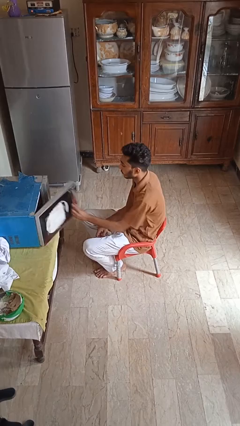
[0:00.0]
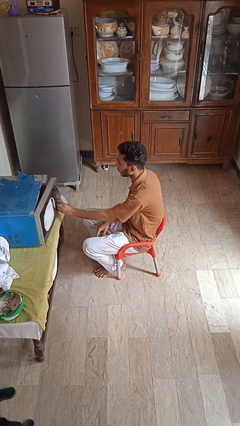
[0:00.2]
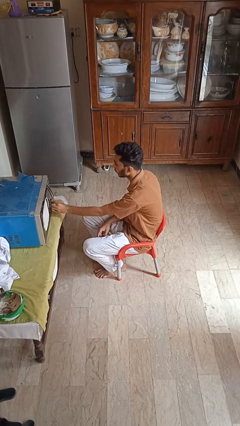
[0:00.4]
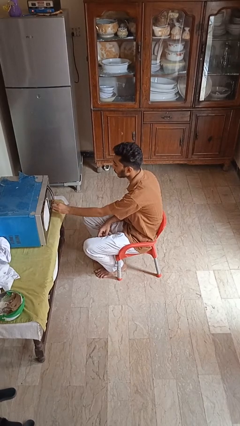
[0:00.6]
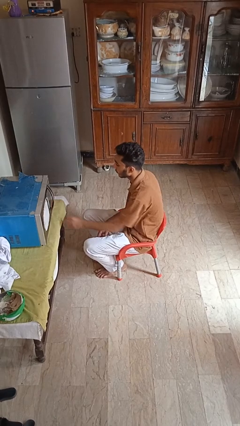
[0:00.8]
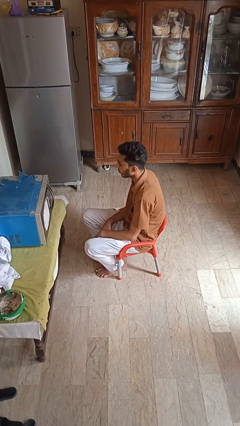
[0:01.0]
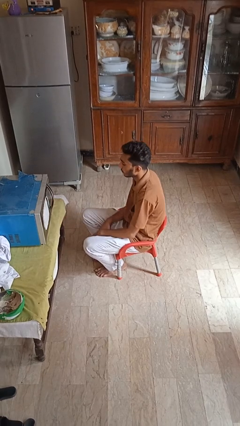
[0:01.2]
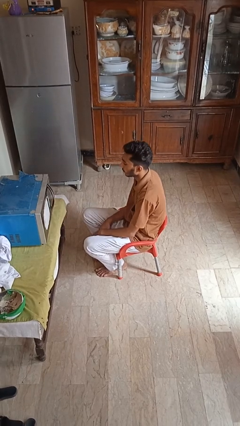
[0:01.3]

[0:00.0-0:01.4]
person closes microwave

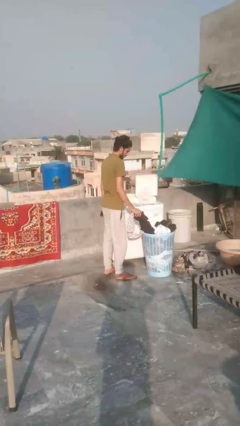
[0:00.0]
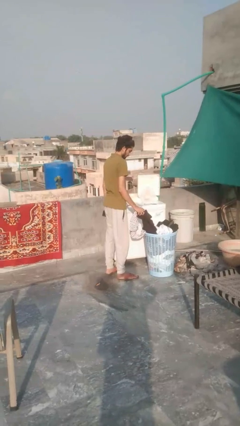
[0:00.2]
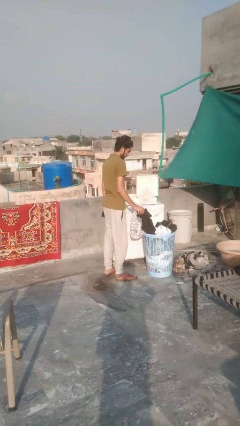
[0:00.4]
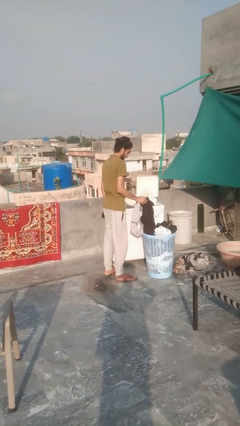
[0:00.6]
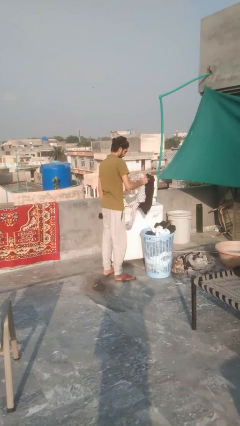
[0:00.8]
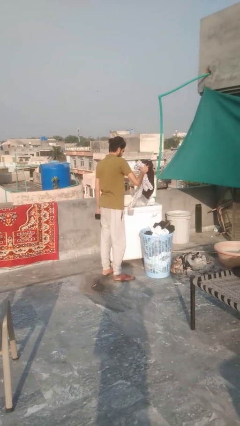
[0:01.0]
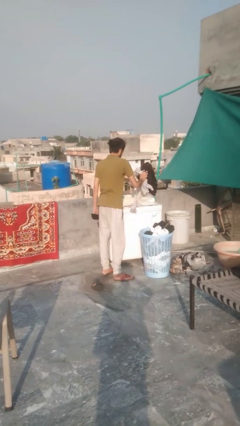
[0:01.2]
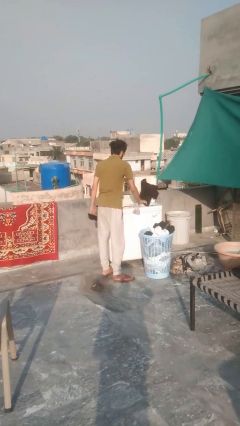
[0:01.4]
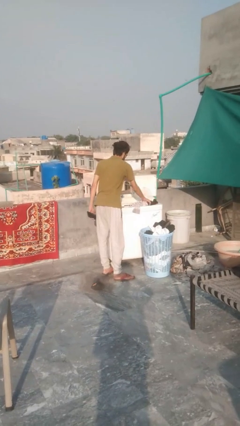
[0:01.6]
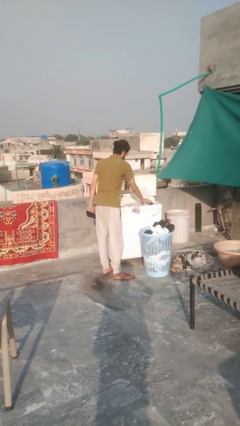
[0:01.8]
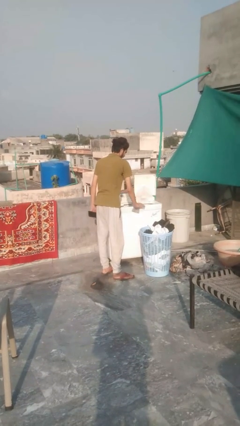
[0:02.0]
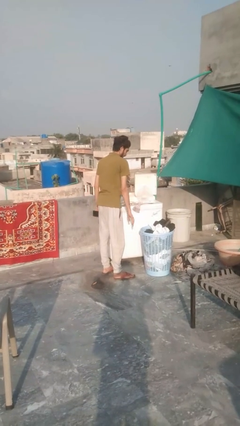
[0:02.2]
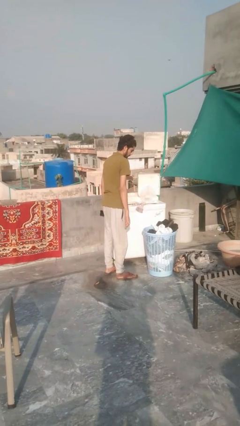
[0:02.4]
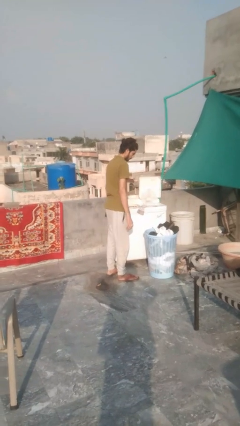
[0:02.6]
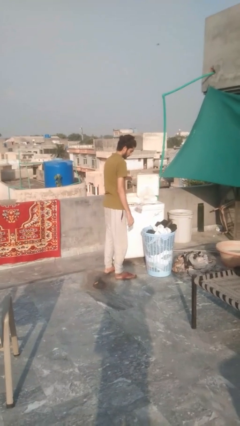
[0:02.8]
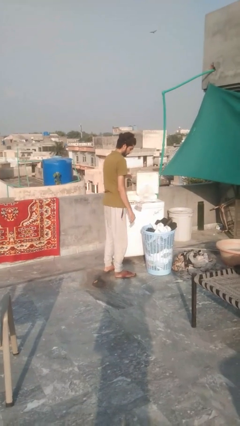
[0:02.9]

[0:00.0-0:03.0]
person loads clotheswasher

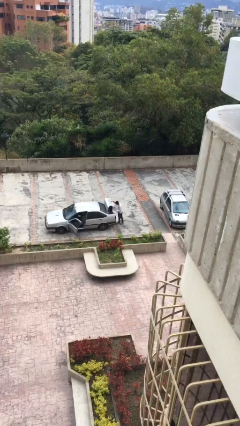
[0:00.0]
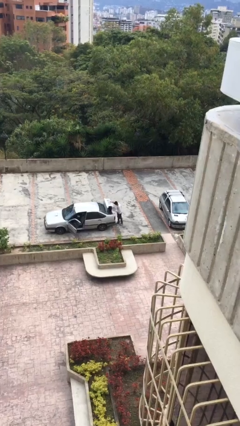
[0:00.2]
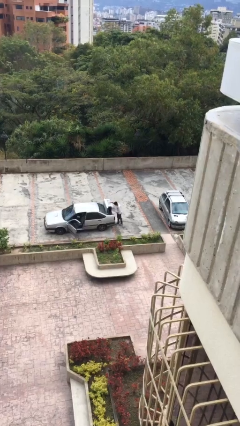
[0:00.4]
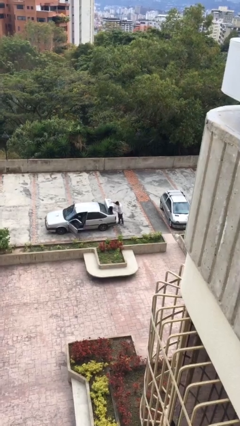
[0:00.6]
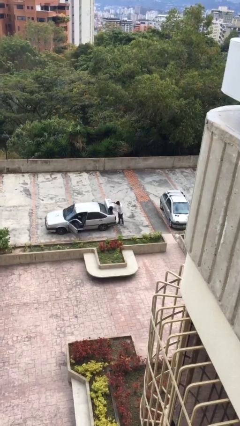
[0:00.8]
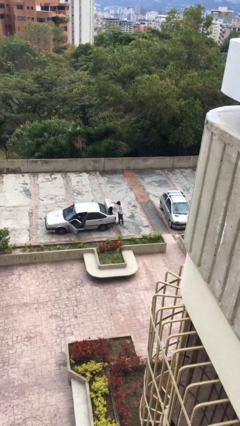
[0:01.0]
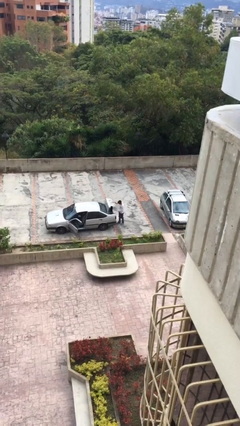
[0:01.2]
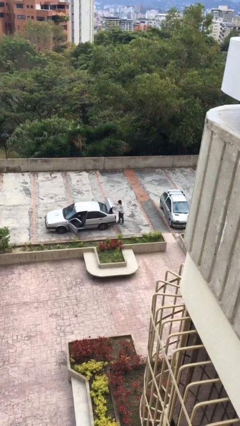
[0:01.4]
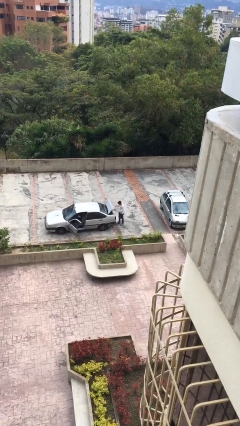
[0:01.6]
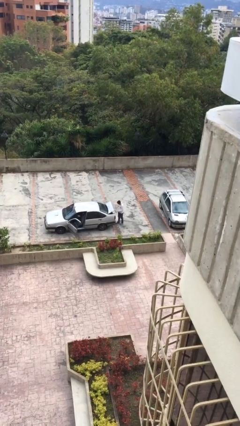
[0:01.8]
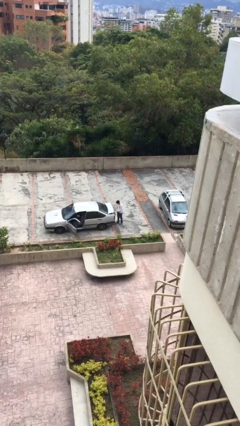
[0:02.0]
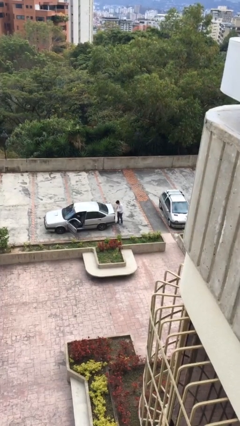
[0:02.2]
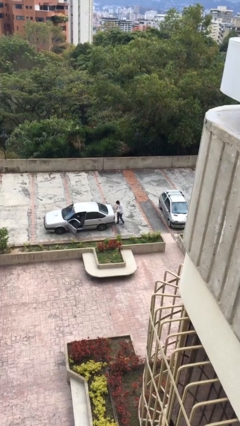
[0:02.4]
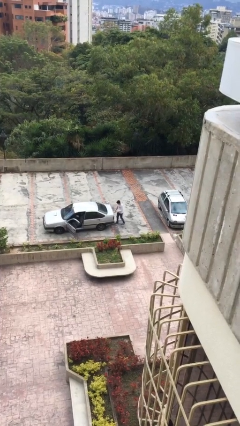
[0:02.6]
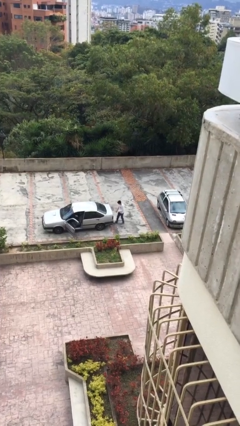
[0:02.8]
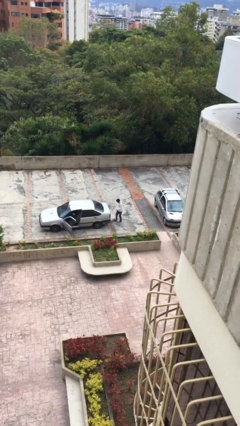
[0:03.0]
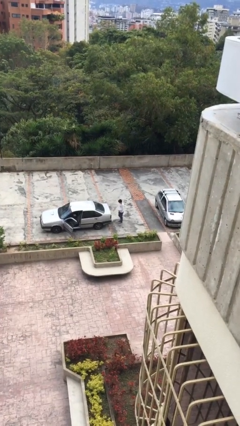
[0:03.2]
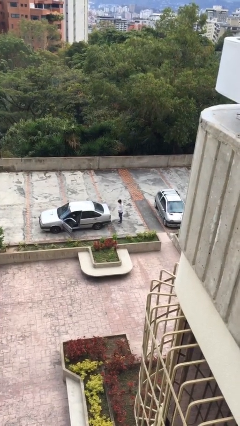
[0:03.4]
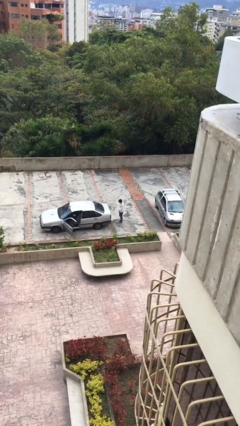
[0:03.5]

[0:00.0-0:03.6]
person closes car trunk

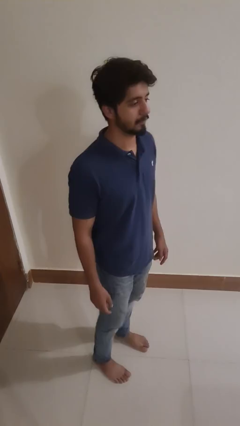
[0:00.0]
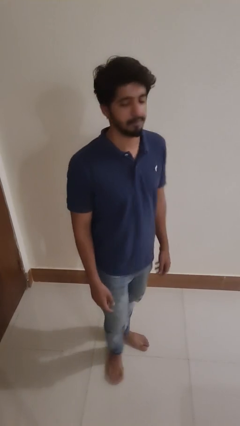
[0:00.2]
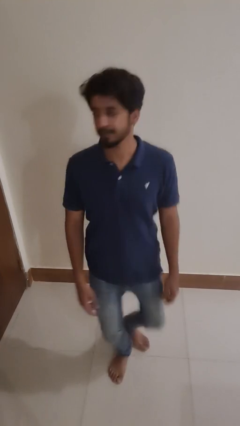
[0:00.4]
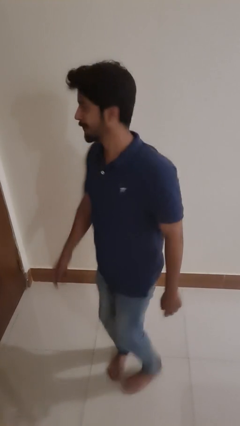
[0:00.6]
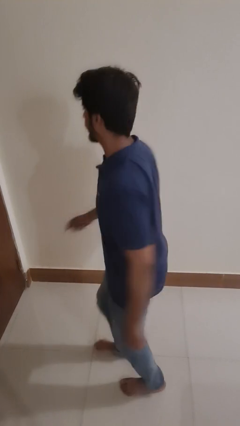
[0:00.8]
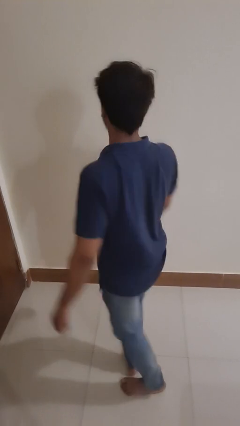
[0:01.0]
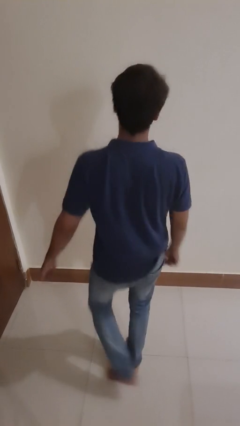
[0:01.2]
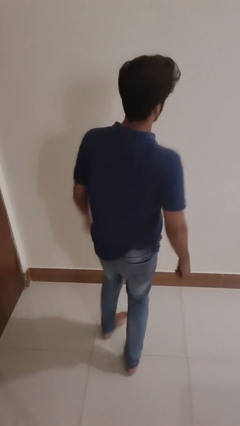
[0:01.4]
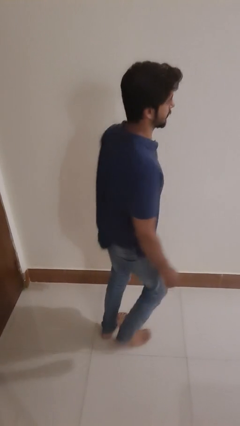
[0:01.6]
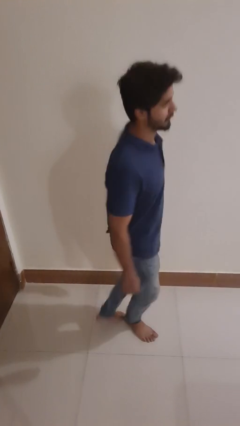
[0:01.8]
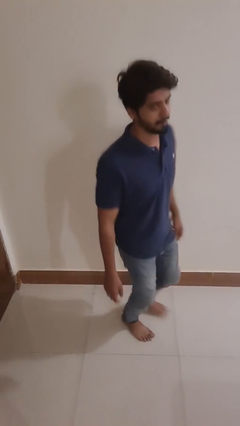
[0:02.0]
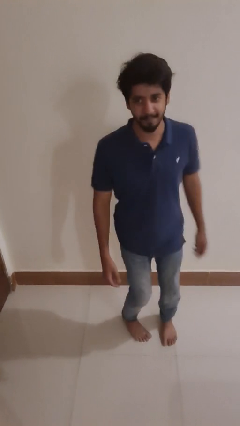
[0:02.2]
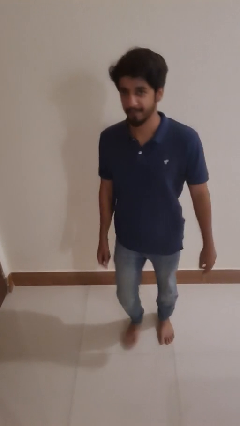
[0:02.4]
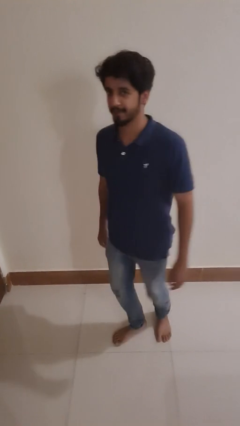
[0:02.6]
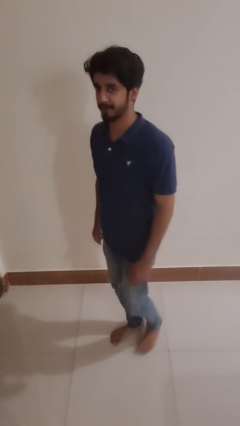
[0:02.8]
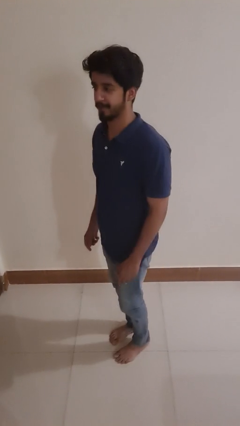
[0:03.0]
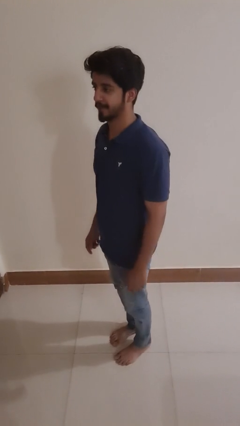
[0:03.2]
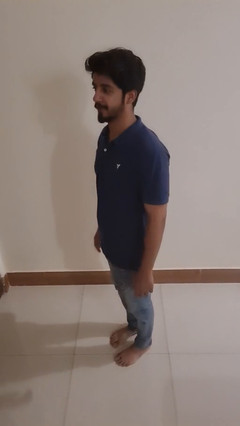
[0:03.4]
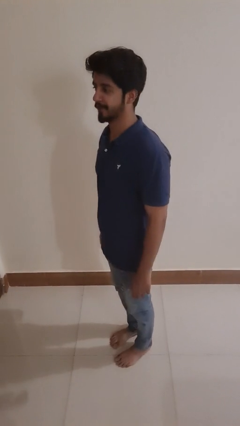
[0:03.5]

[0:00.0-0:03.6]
person twirls

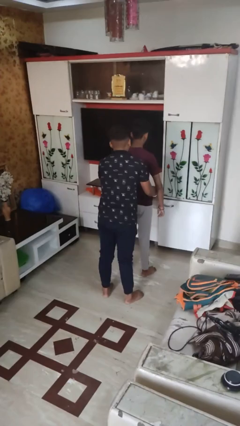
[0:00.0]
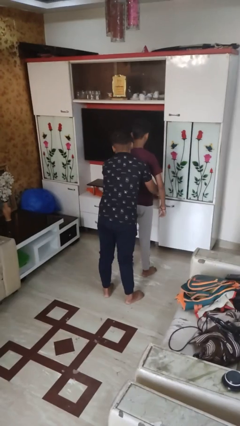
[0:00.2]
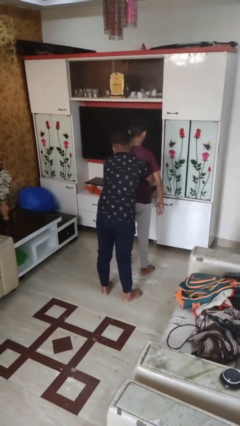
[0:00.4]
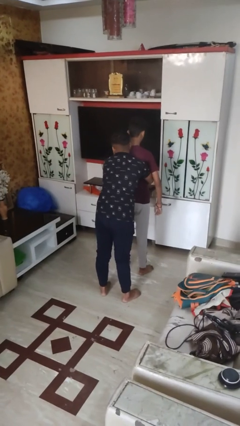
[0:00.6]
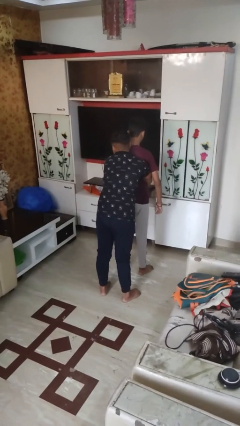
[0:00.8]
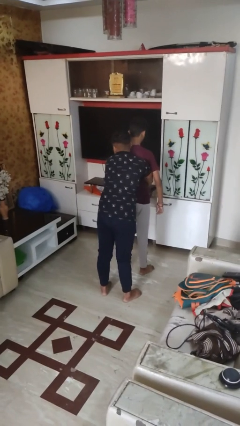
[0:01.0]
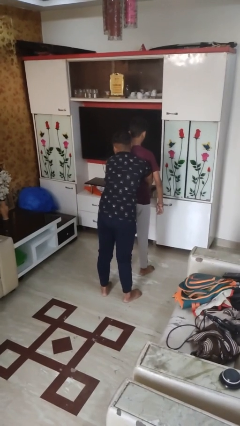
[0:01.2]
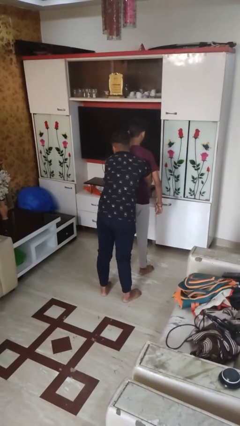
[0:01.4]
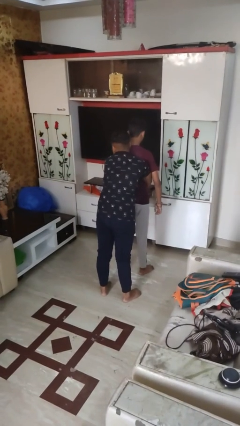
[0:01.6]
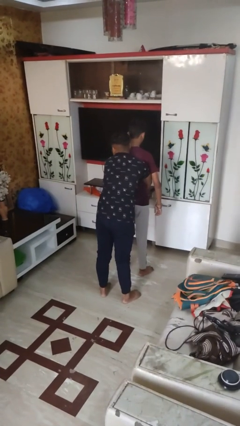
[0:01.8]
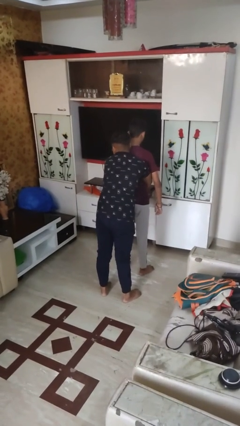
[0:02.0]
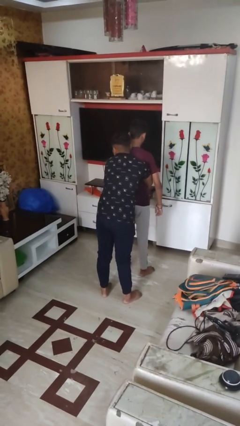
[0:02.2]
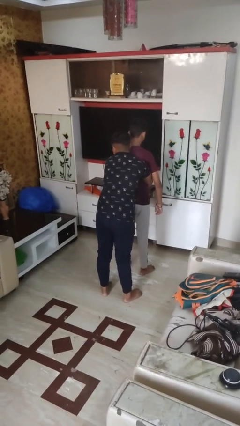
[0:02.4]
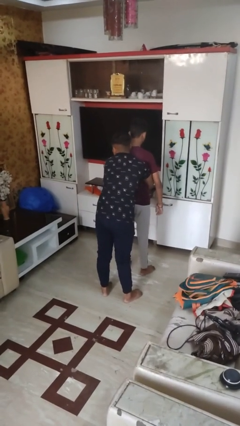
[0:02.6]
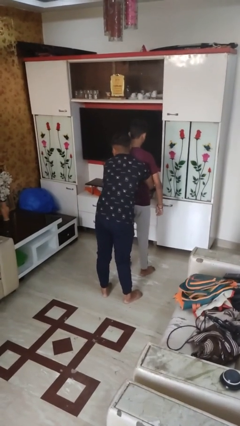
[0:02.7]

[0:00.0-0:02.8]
person hugs person from behind

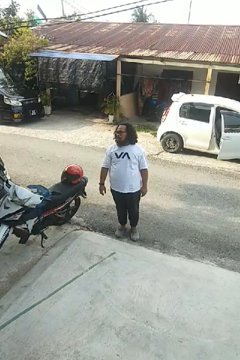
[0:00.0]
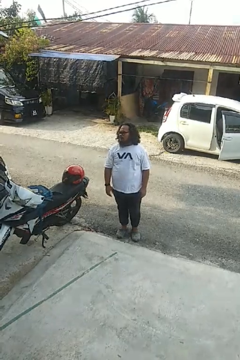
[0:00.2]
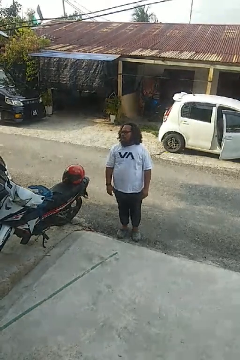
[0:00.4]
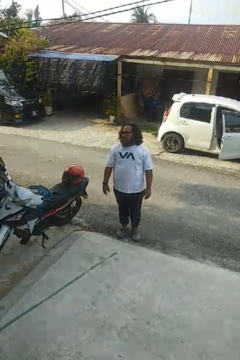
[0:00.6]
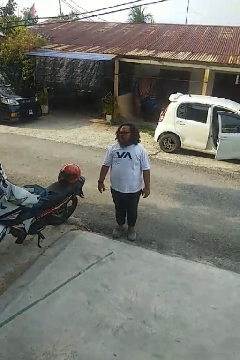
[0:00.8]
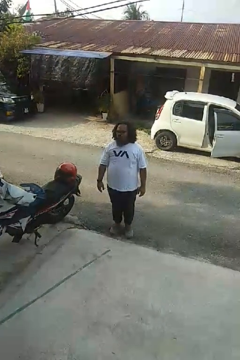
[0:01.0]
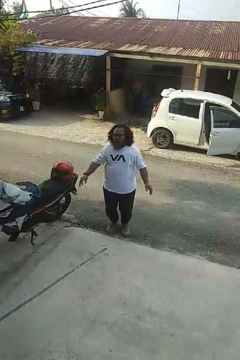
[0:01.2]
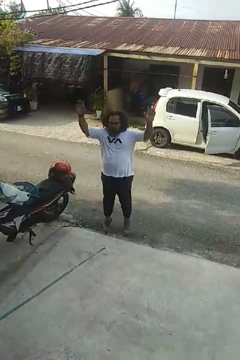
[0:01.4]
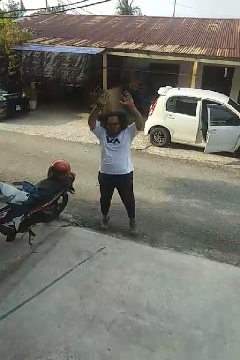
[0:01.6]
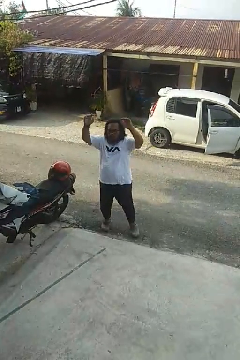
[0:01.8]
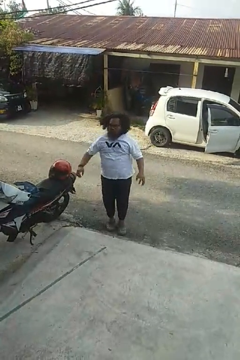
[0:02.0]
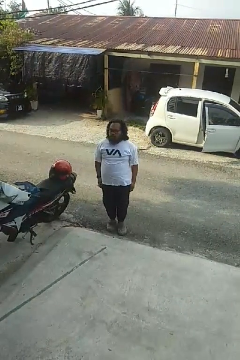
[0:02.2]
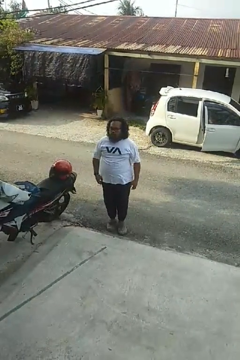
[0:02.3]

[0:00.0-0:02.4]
person exercises with jumping jacks

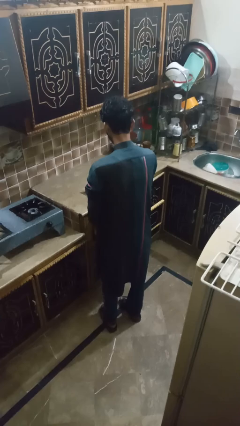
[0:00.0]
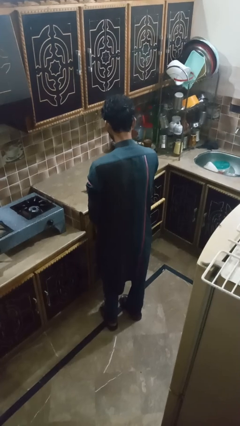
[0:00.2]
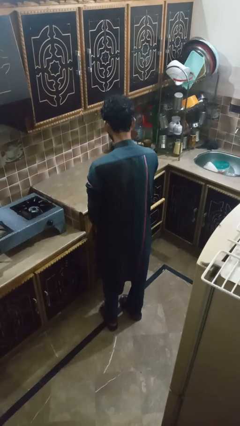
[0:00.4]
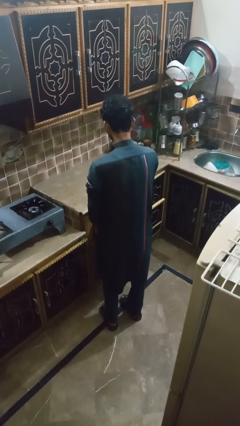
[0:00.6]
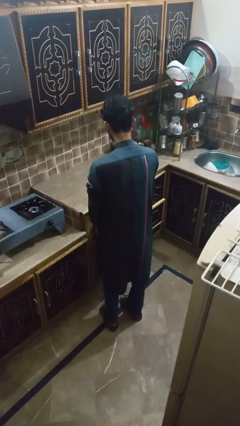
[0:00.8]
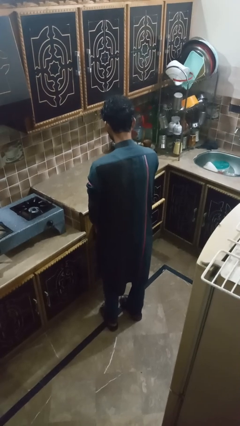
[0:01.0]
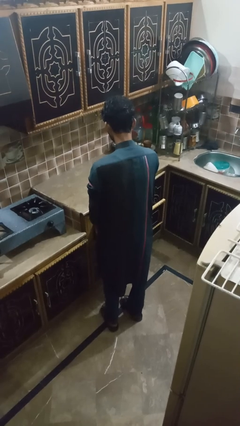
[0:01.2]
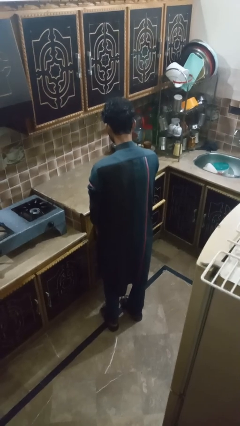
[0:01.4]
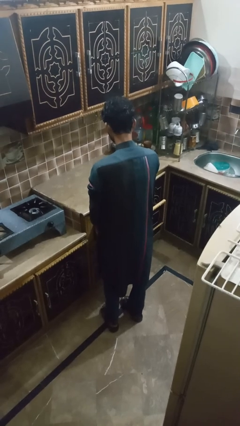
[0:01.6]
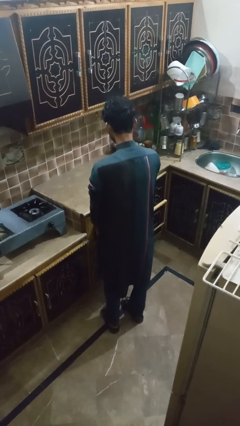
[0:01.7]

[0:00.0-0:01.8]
person puts object into kitchen drawer
